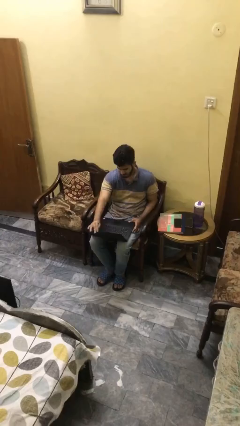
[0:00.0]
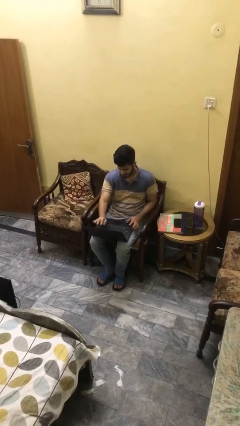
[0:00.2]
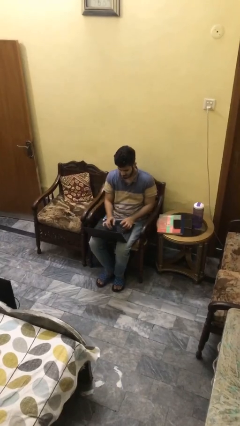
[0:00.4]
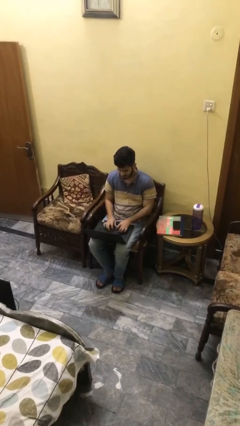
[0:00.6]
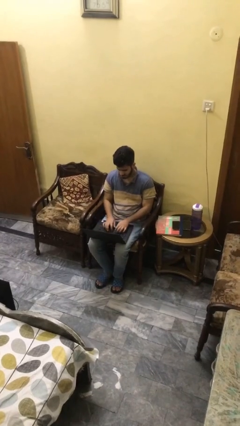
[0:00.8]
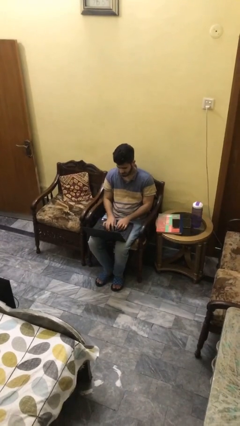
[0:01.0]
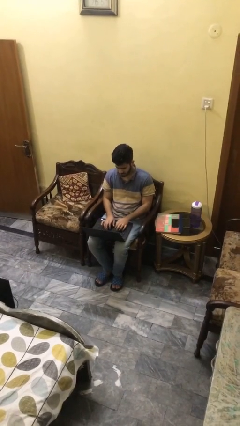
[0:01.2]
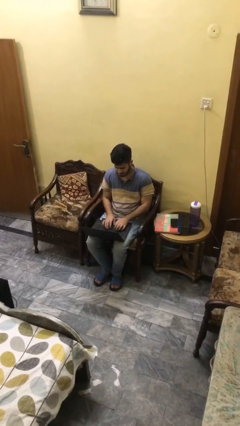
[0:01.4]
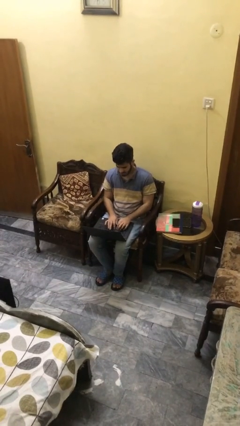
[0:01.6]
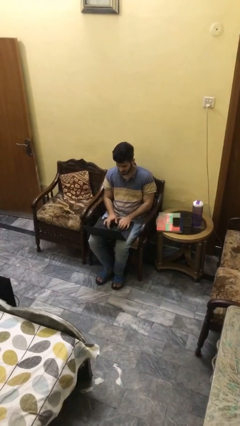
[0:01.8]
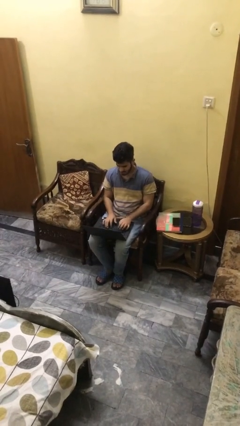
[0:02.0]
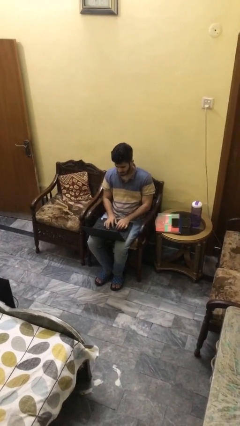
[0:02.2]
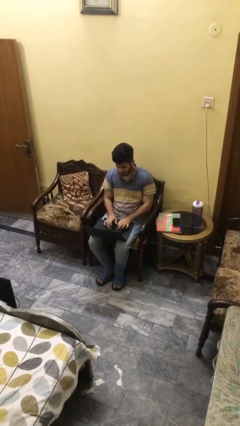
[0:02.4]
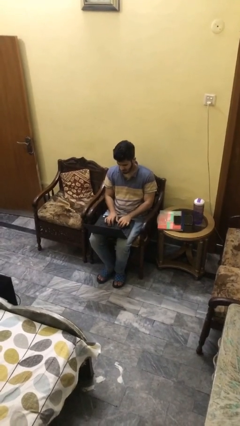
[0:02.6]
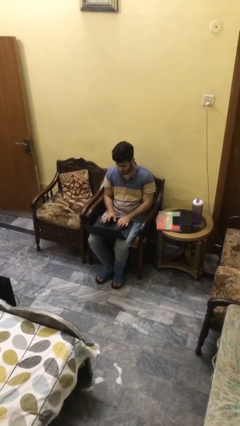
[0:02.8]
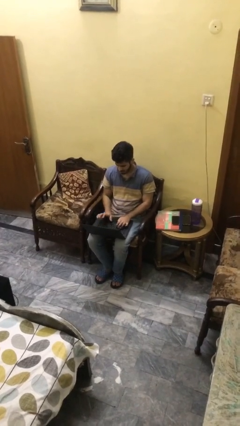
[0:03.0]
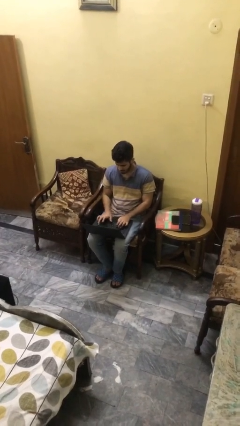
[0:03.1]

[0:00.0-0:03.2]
person interacts with laptop

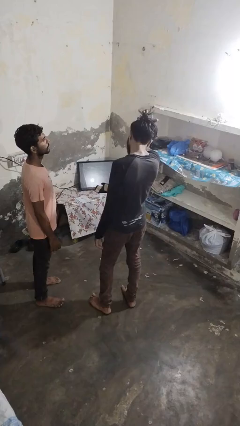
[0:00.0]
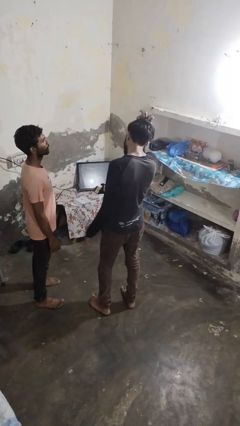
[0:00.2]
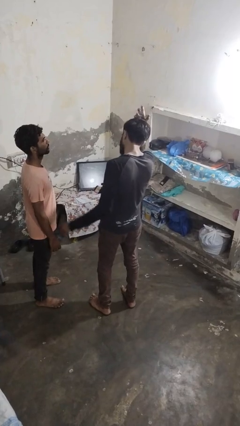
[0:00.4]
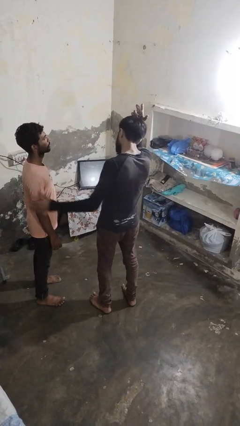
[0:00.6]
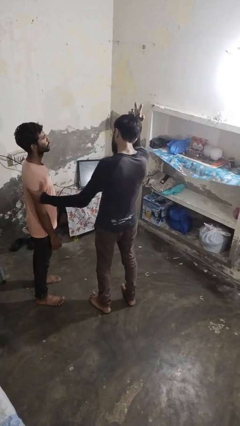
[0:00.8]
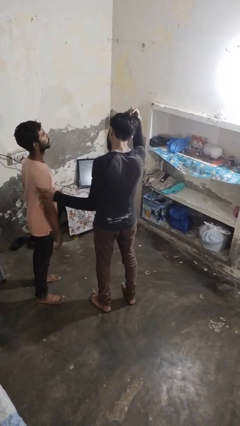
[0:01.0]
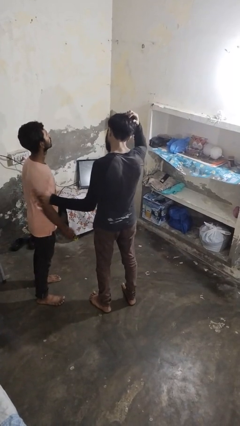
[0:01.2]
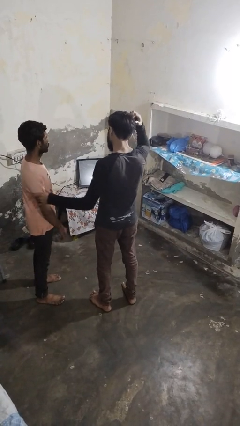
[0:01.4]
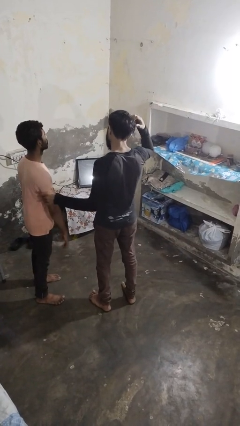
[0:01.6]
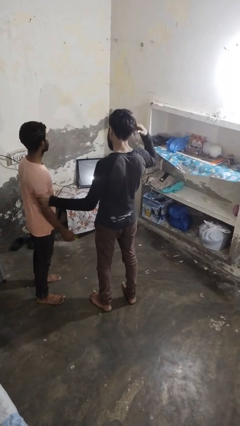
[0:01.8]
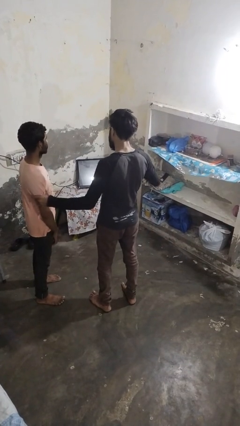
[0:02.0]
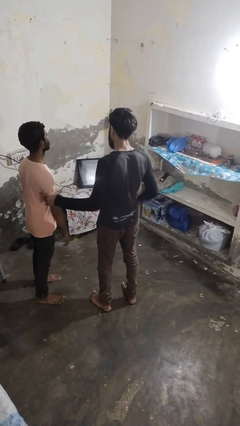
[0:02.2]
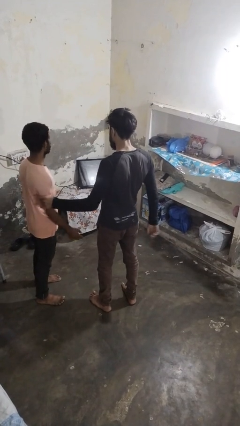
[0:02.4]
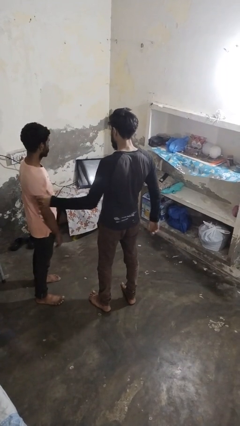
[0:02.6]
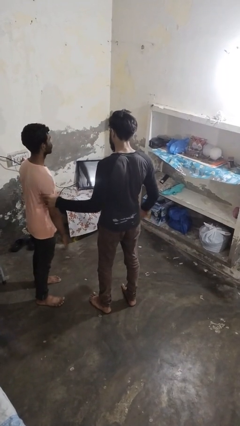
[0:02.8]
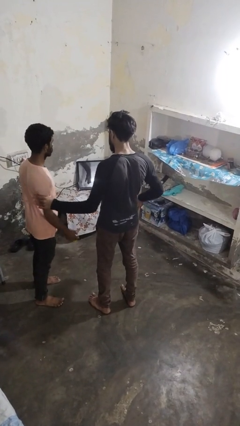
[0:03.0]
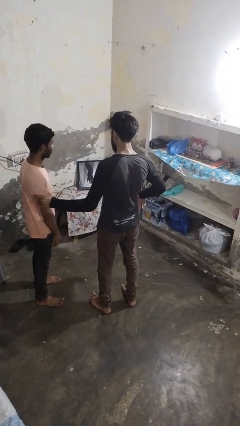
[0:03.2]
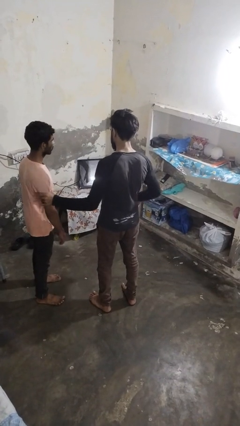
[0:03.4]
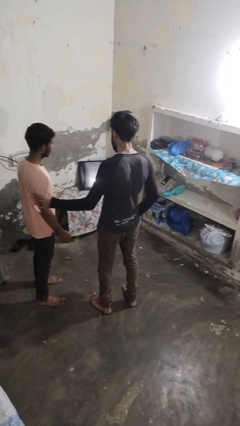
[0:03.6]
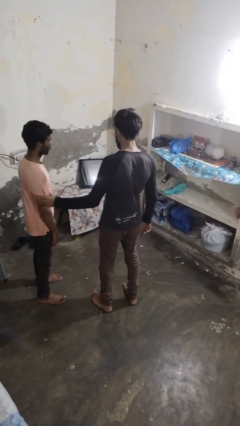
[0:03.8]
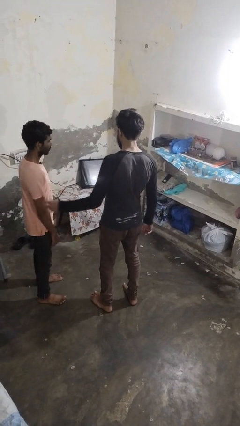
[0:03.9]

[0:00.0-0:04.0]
person grabs person by bicep

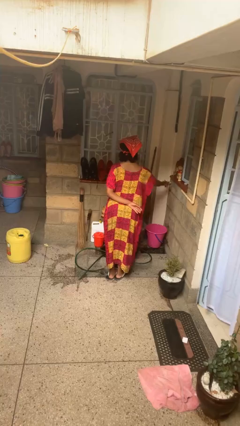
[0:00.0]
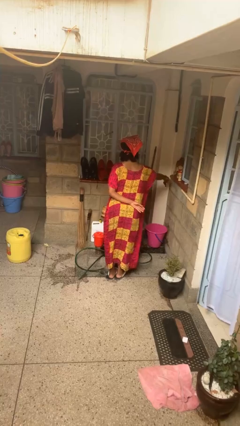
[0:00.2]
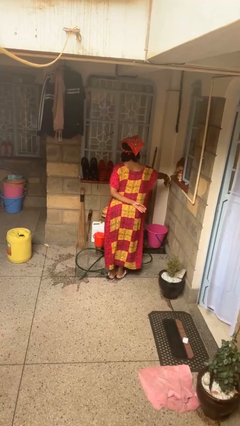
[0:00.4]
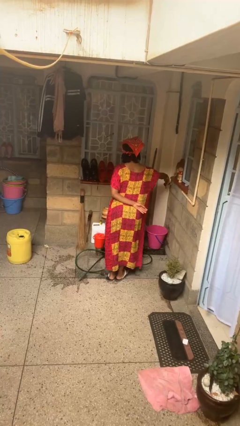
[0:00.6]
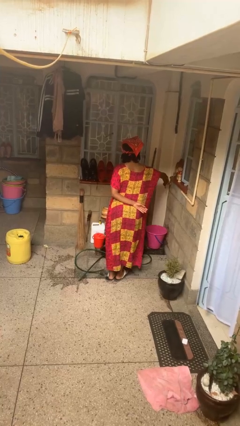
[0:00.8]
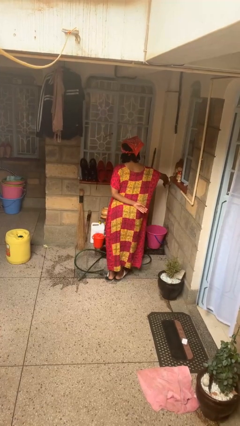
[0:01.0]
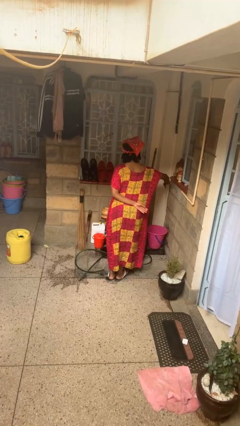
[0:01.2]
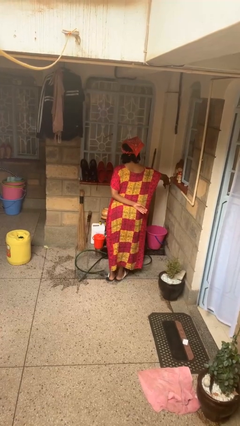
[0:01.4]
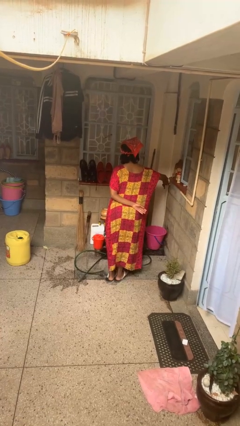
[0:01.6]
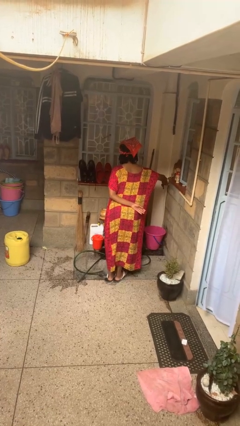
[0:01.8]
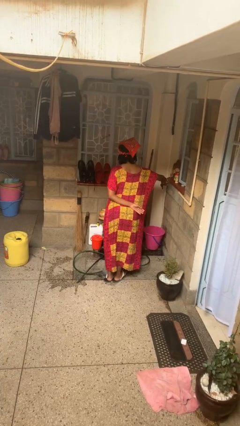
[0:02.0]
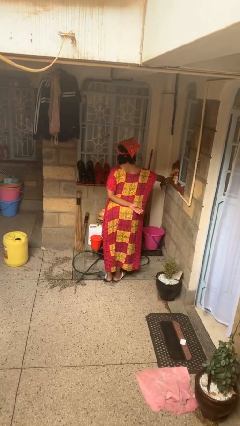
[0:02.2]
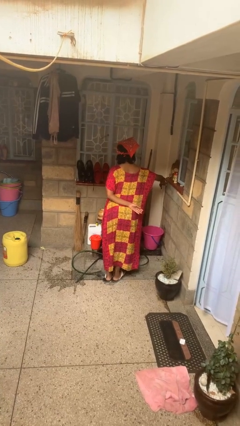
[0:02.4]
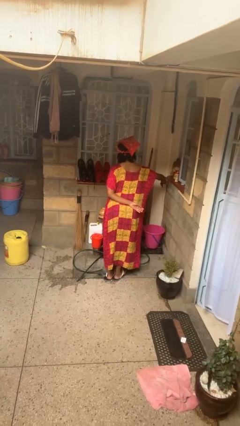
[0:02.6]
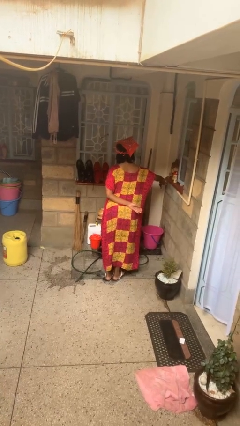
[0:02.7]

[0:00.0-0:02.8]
person turns on faucet

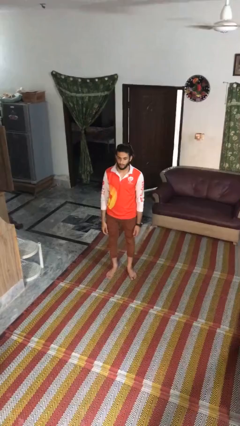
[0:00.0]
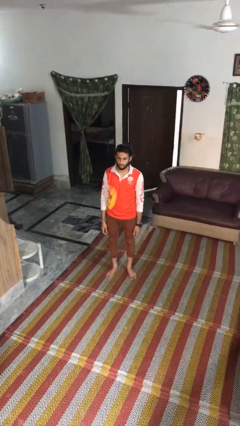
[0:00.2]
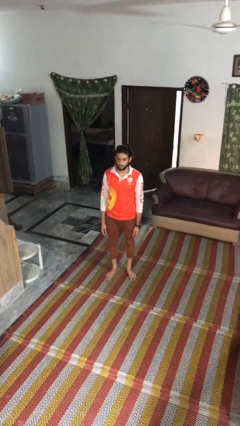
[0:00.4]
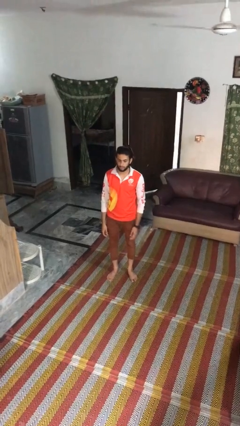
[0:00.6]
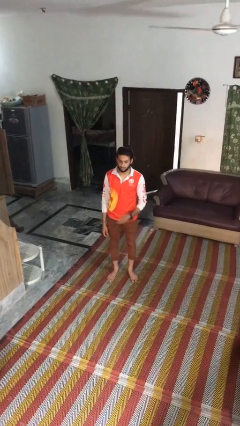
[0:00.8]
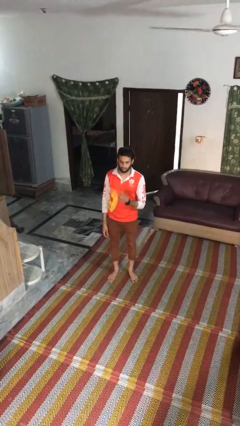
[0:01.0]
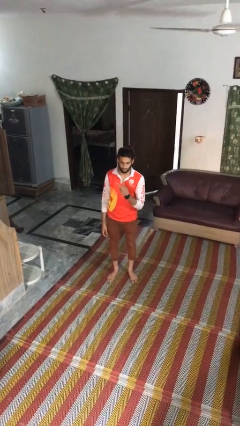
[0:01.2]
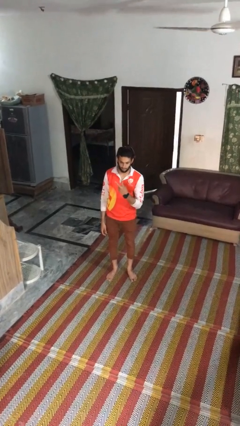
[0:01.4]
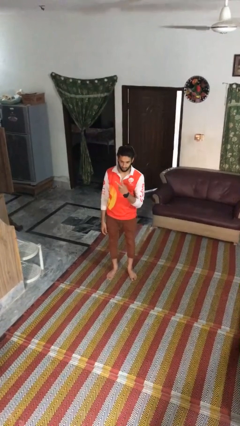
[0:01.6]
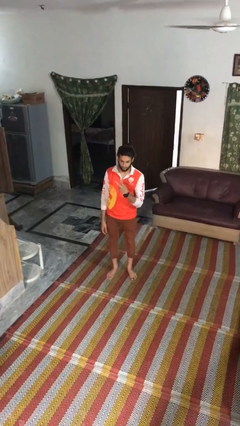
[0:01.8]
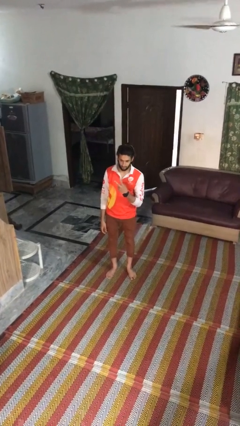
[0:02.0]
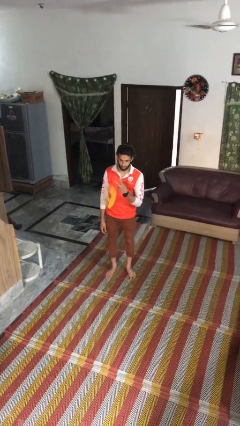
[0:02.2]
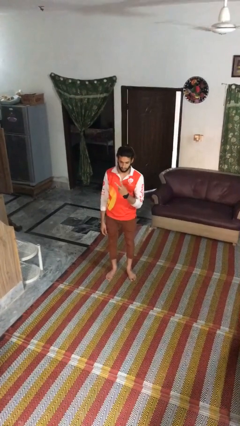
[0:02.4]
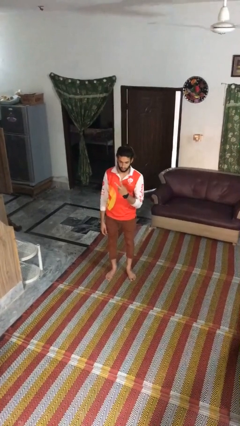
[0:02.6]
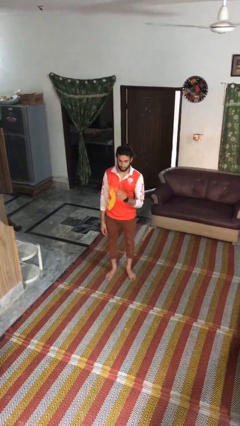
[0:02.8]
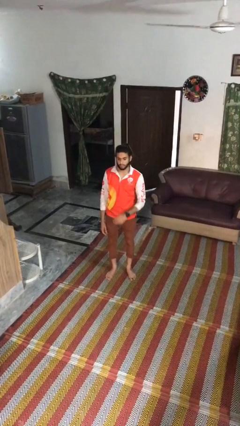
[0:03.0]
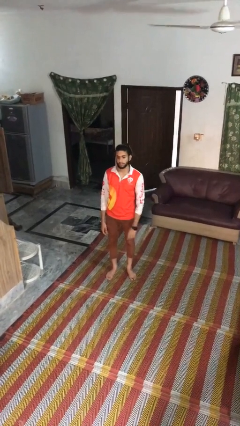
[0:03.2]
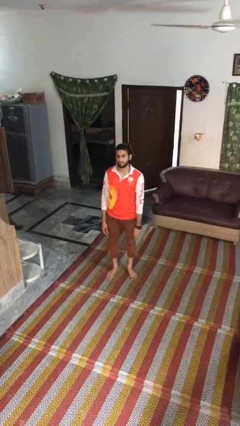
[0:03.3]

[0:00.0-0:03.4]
person gestures peace

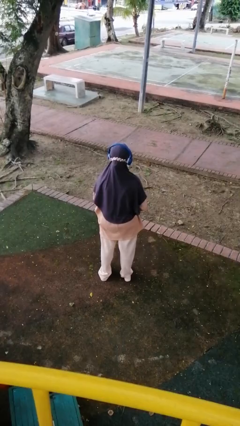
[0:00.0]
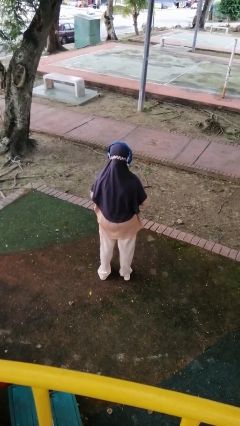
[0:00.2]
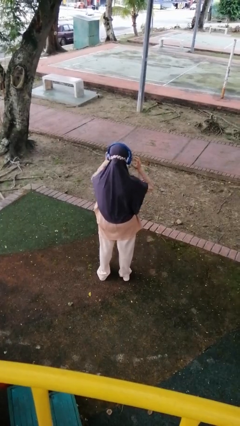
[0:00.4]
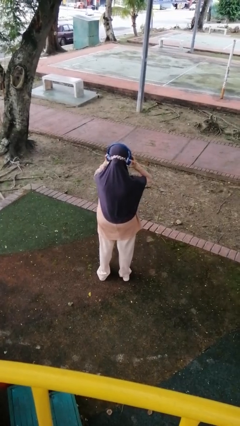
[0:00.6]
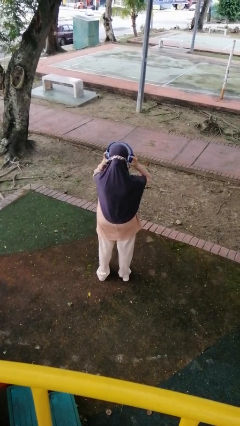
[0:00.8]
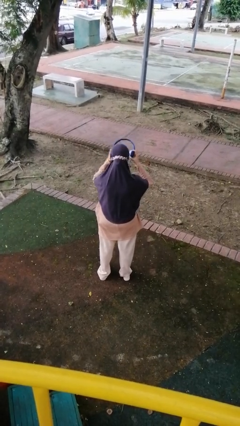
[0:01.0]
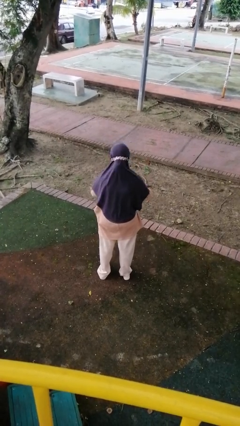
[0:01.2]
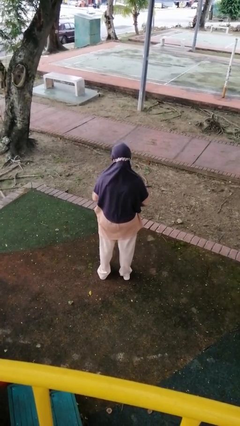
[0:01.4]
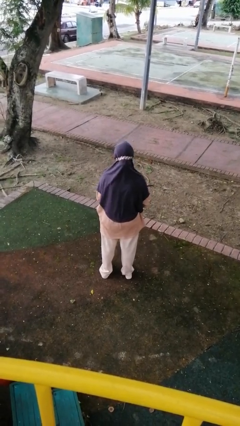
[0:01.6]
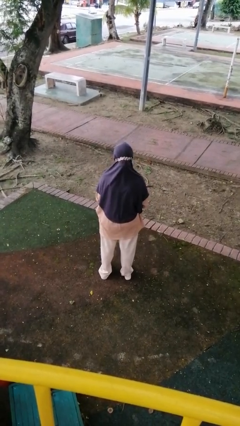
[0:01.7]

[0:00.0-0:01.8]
person takes off headphones

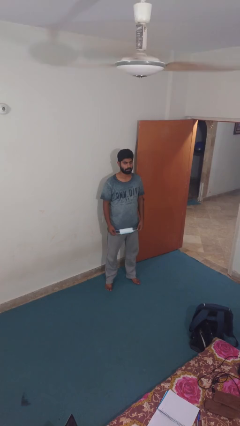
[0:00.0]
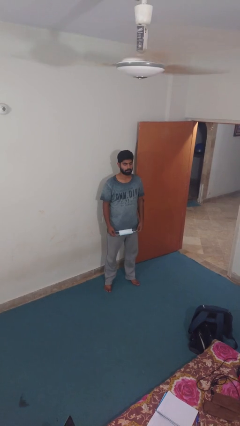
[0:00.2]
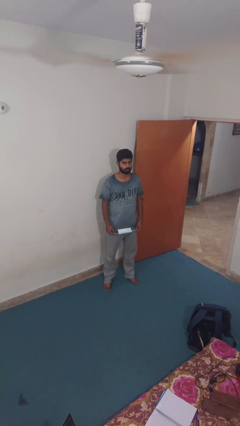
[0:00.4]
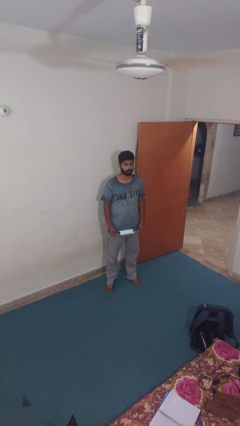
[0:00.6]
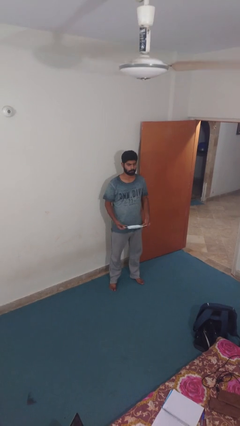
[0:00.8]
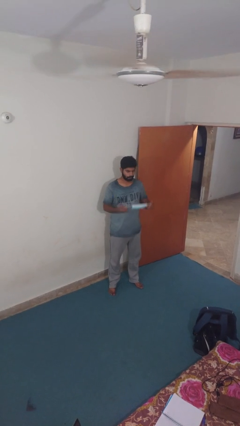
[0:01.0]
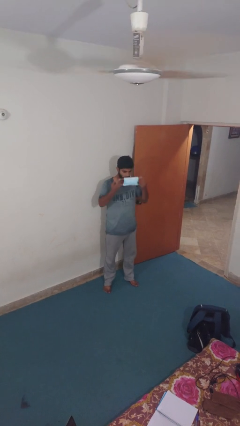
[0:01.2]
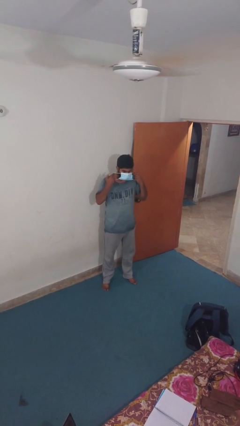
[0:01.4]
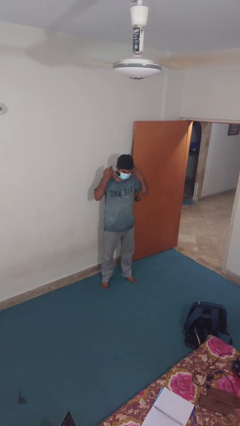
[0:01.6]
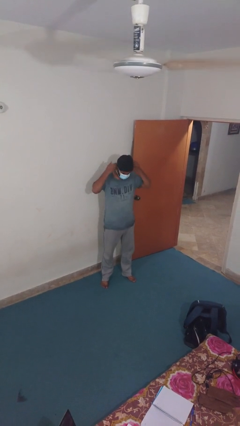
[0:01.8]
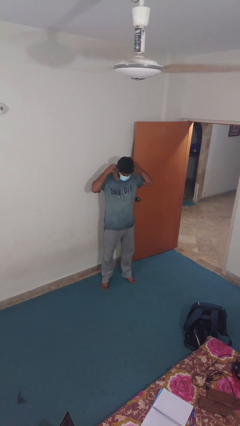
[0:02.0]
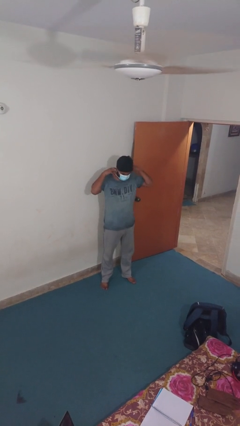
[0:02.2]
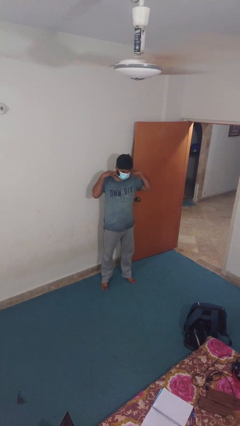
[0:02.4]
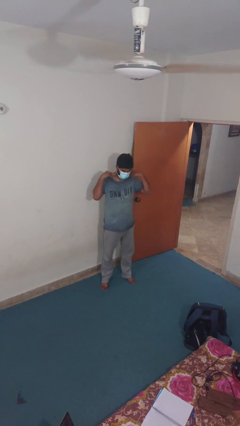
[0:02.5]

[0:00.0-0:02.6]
person puts on facemask
